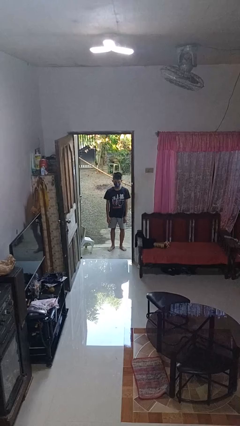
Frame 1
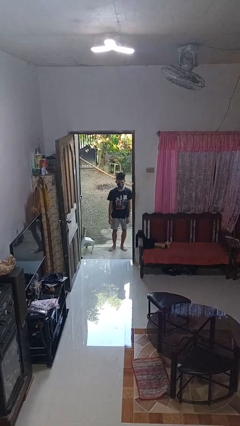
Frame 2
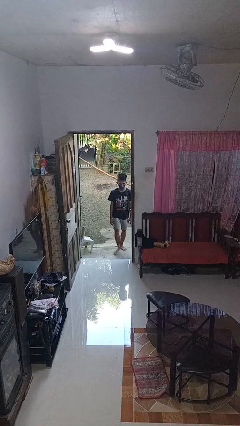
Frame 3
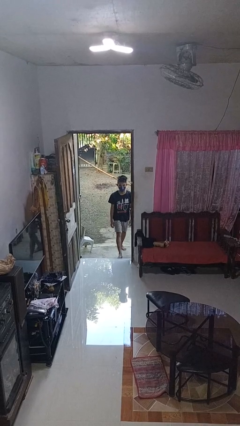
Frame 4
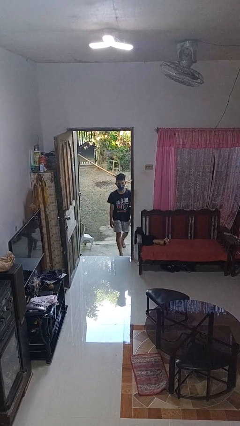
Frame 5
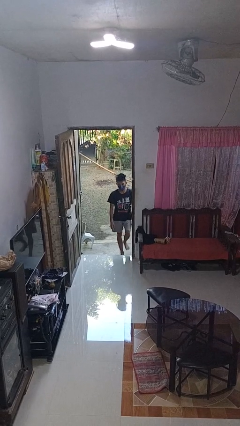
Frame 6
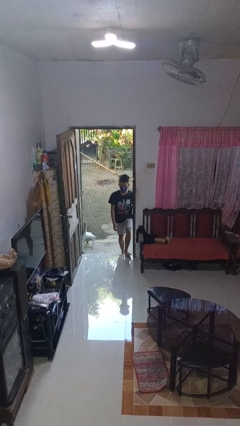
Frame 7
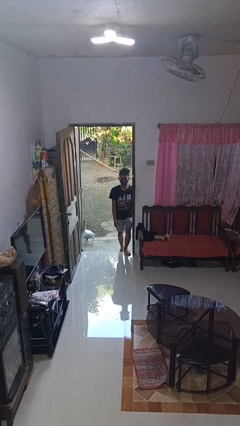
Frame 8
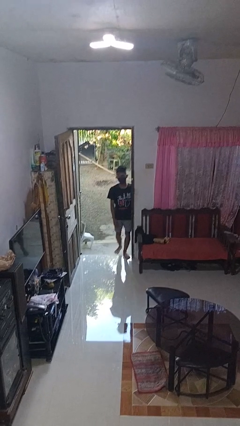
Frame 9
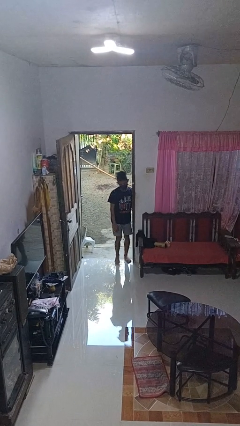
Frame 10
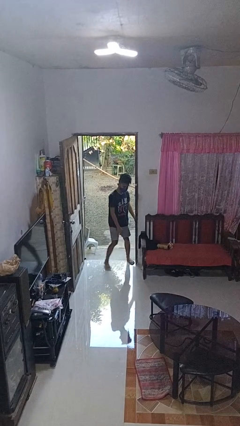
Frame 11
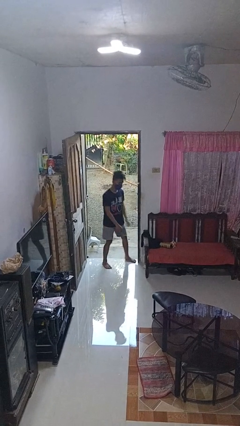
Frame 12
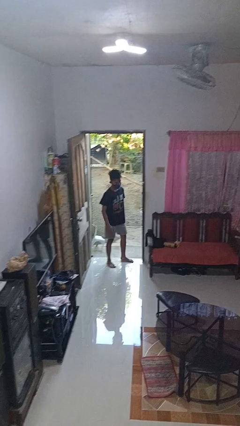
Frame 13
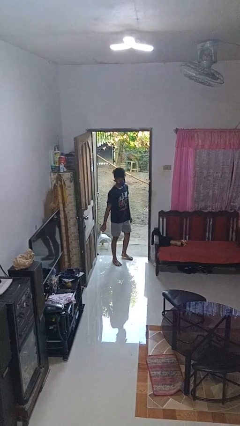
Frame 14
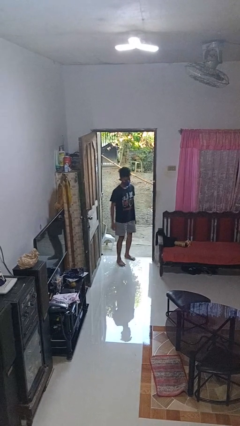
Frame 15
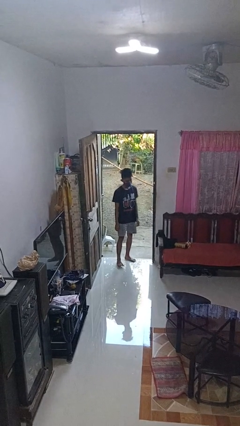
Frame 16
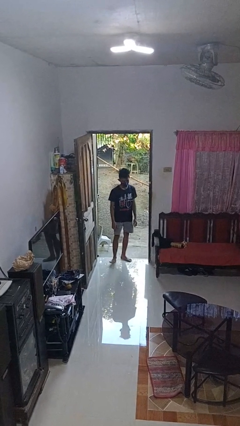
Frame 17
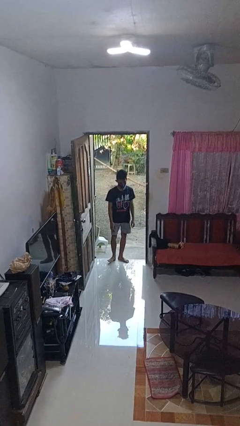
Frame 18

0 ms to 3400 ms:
person bumps into wall

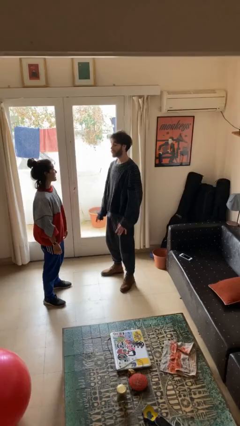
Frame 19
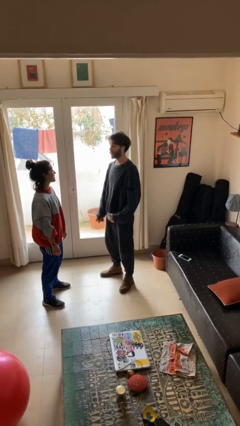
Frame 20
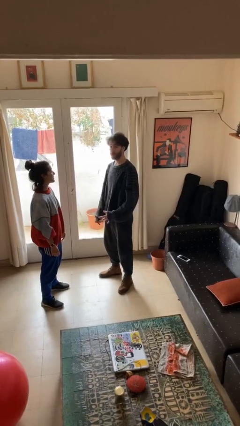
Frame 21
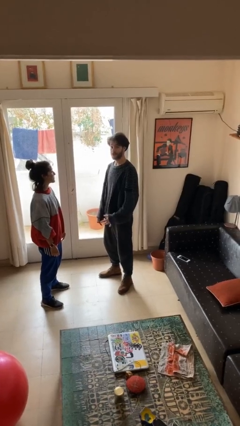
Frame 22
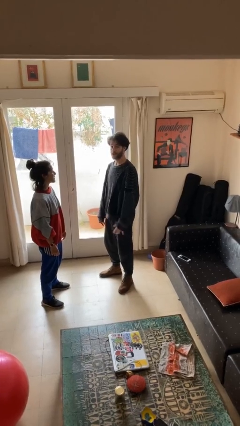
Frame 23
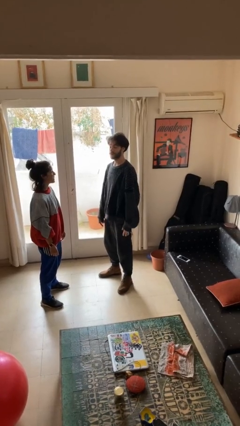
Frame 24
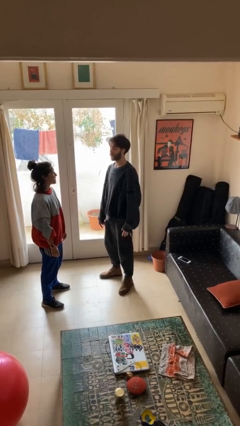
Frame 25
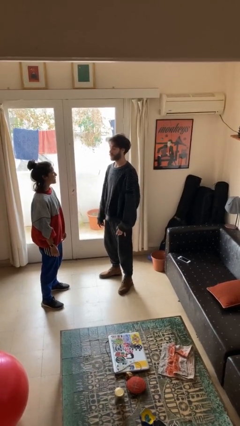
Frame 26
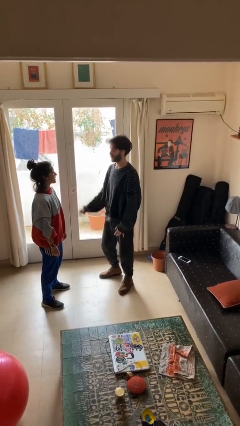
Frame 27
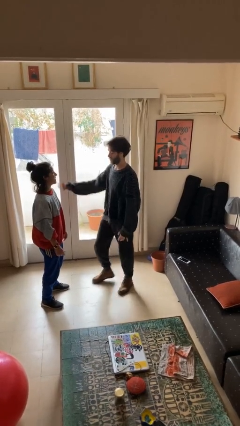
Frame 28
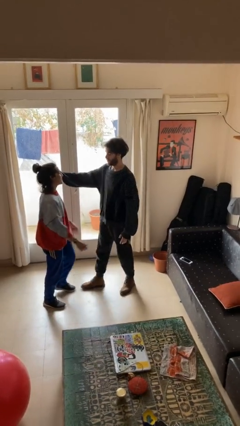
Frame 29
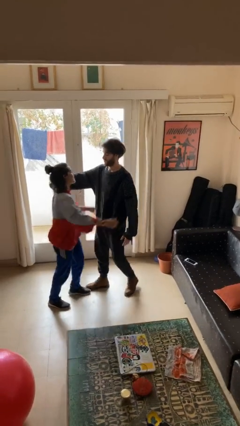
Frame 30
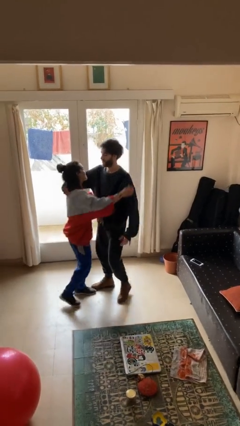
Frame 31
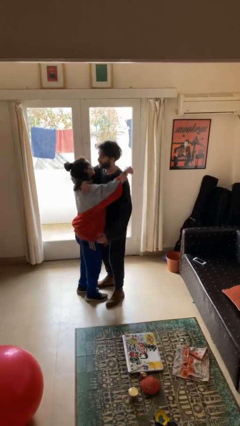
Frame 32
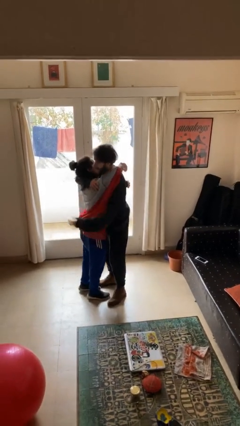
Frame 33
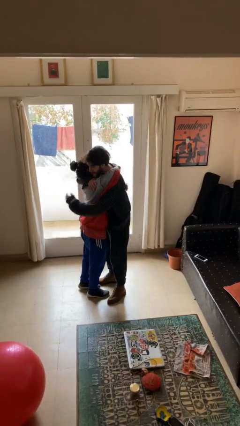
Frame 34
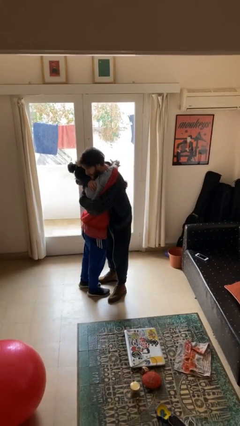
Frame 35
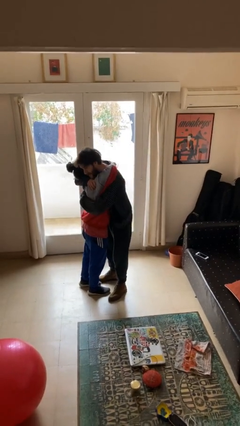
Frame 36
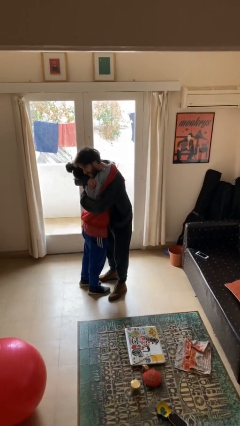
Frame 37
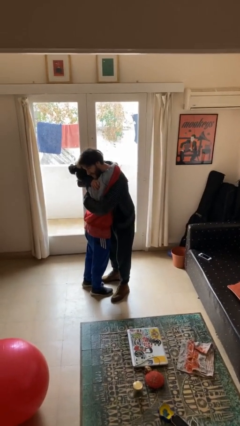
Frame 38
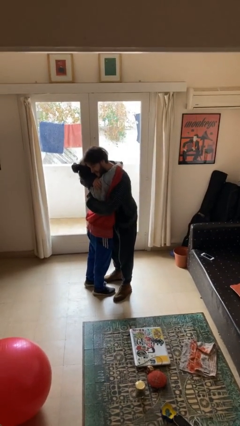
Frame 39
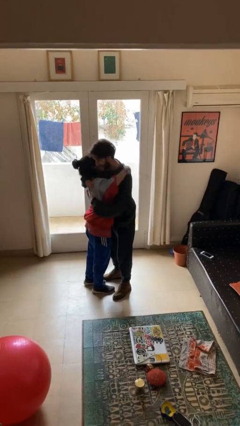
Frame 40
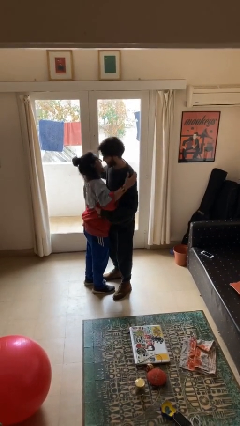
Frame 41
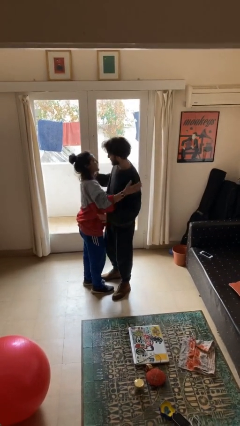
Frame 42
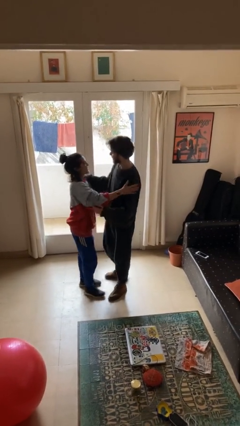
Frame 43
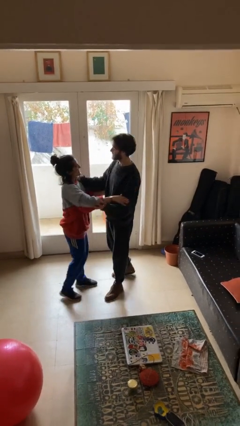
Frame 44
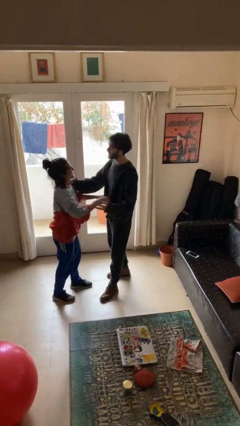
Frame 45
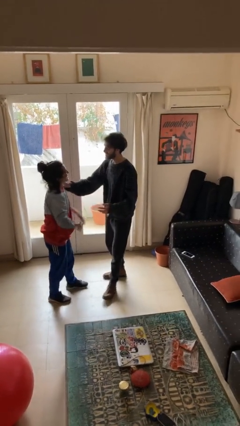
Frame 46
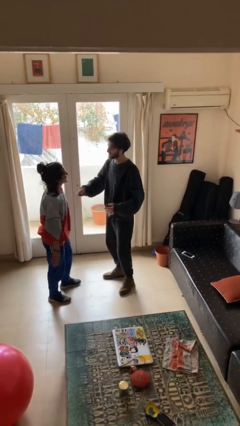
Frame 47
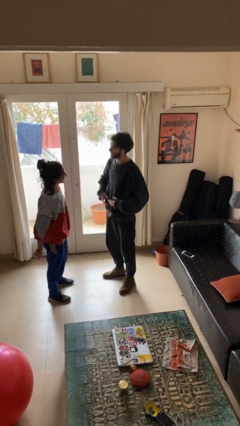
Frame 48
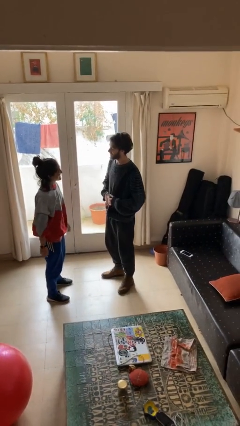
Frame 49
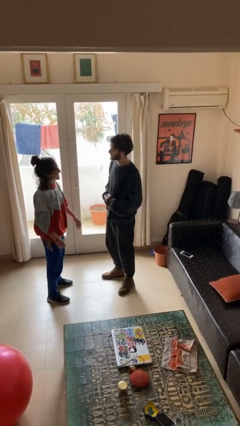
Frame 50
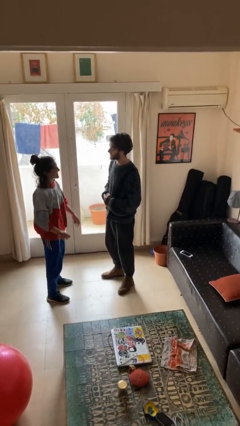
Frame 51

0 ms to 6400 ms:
person embraces person

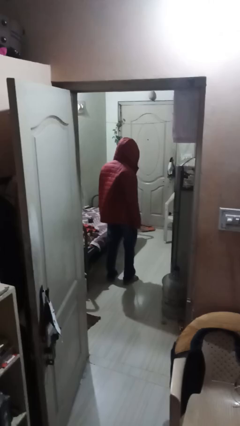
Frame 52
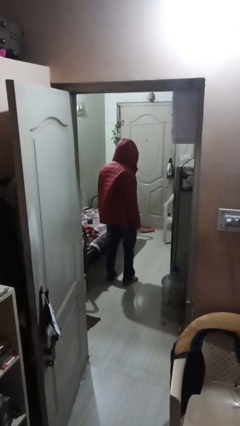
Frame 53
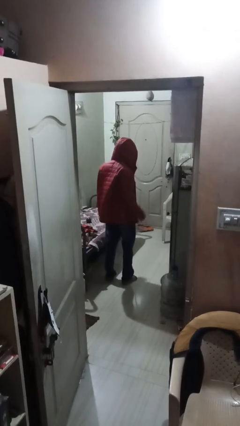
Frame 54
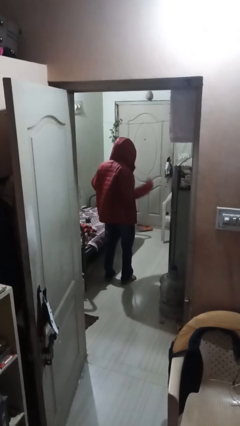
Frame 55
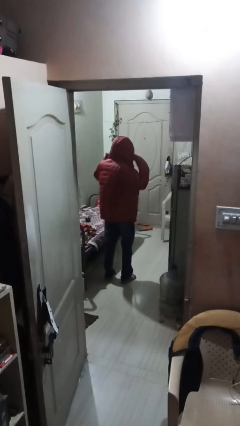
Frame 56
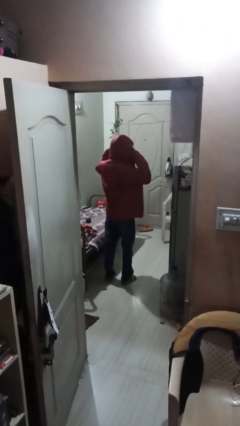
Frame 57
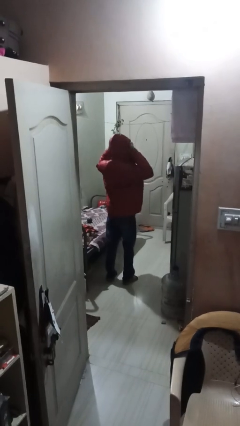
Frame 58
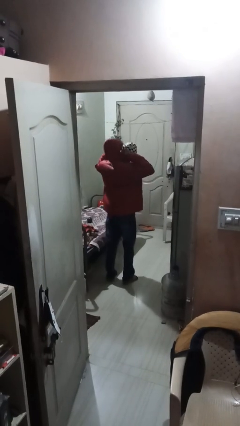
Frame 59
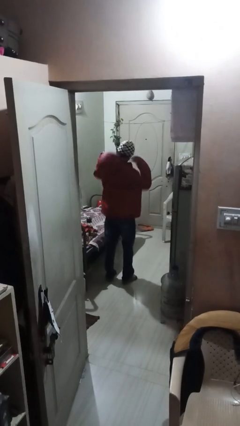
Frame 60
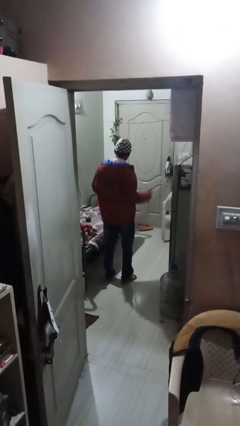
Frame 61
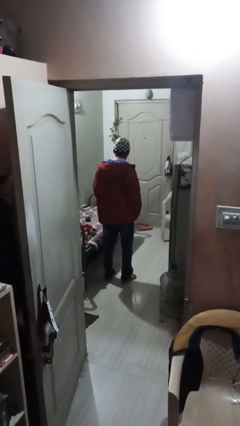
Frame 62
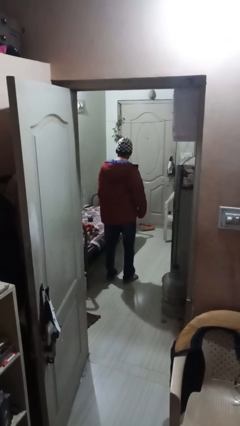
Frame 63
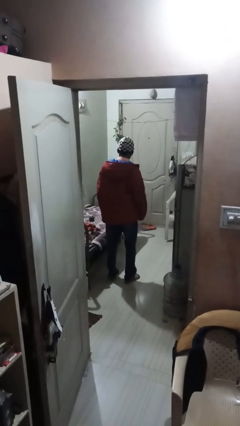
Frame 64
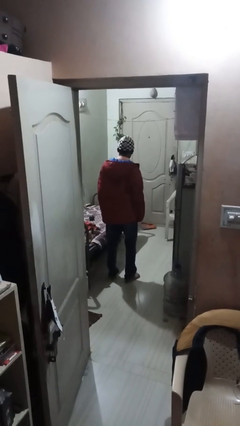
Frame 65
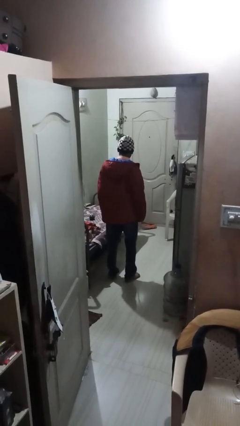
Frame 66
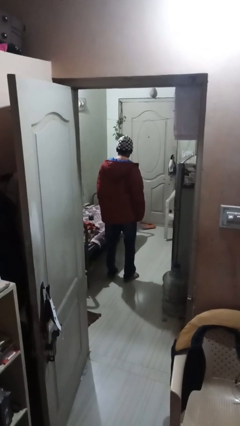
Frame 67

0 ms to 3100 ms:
person takes off hoodie

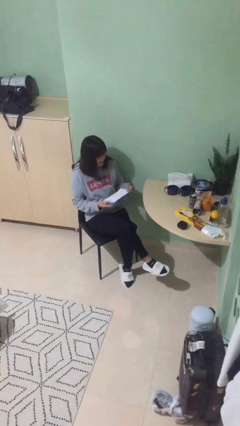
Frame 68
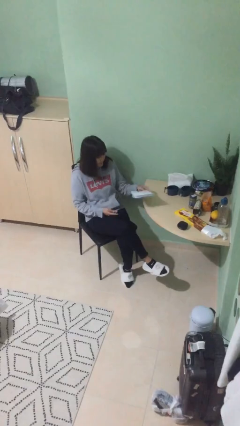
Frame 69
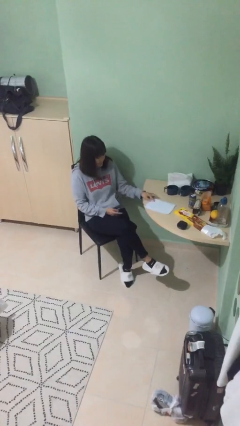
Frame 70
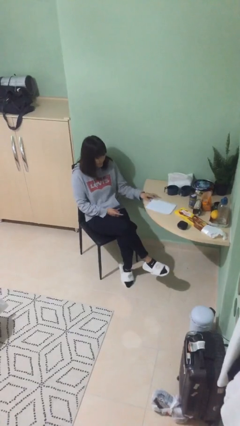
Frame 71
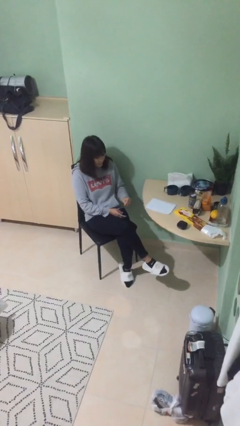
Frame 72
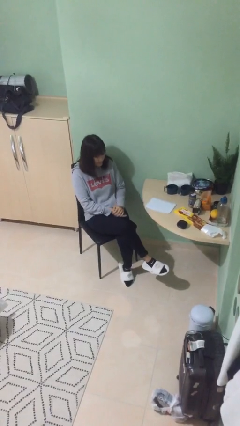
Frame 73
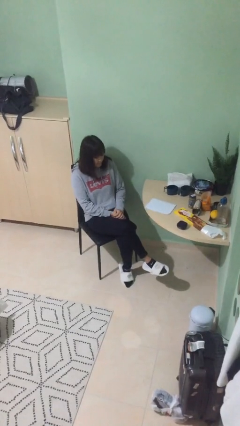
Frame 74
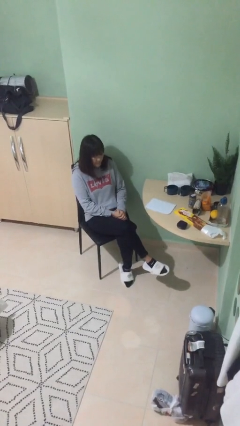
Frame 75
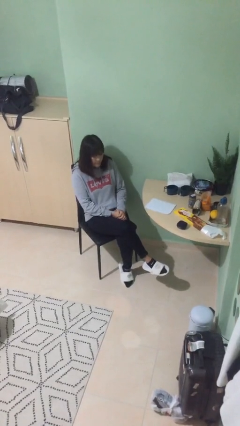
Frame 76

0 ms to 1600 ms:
person puts down object on table

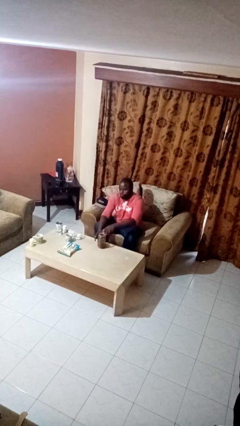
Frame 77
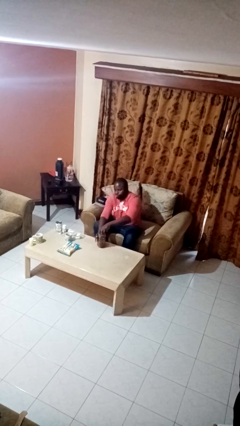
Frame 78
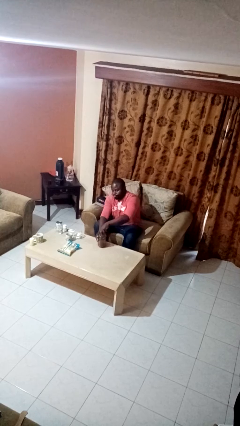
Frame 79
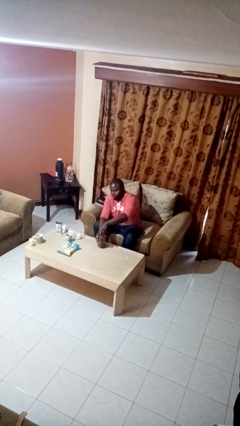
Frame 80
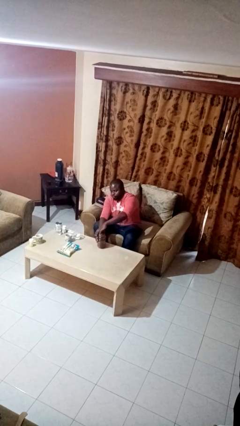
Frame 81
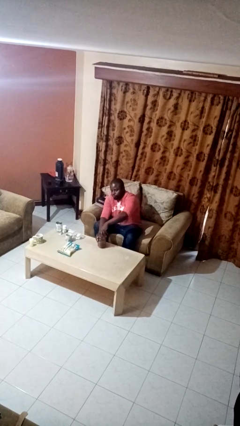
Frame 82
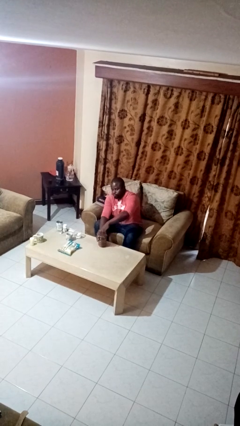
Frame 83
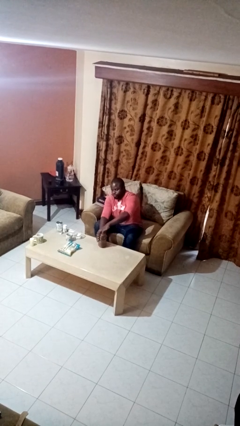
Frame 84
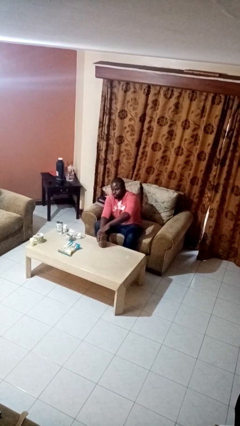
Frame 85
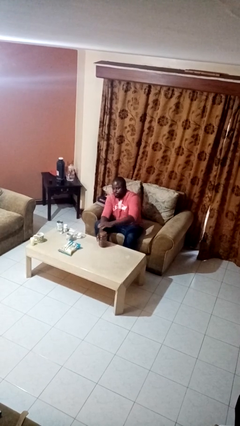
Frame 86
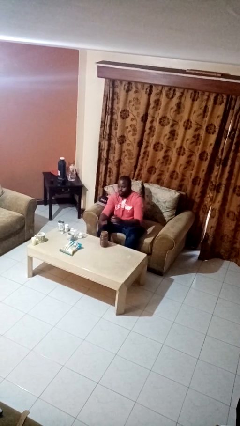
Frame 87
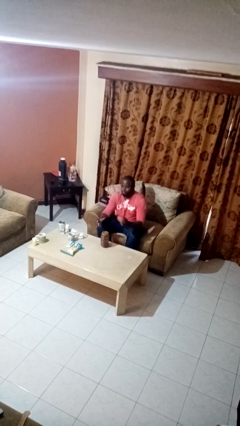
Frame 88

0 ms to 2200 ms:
person closes jar

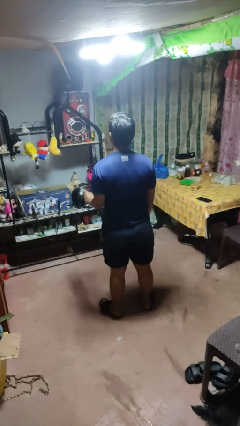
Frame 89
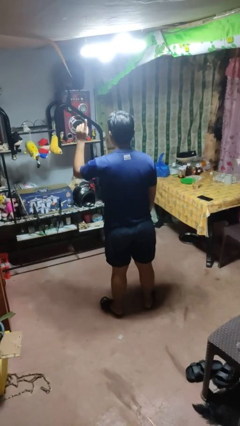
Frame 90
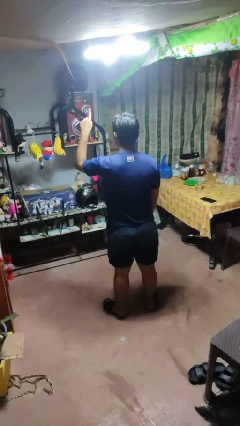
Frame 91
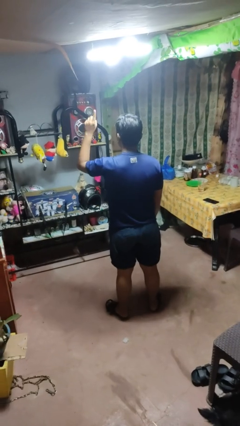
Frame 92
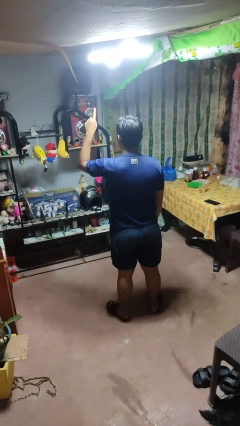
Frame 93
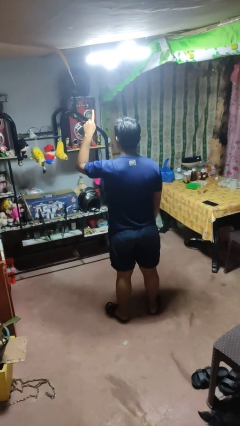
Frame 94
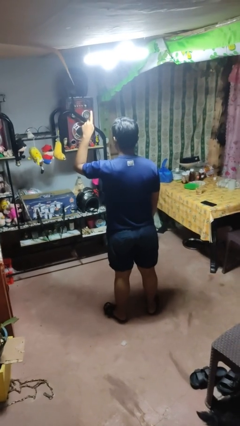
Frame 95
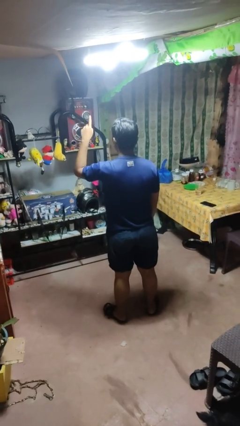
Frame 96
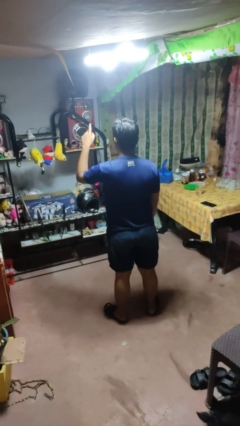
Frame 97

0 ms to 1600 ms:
person gestures number one
